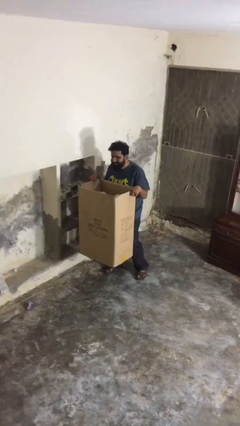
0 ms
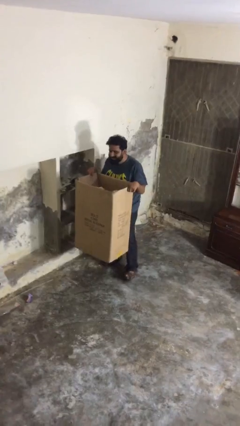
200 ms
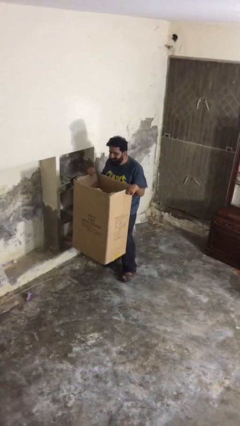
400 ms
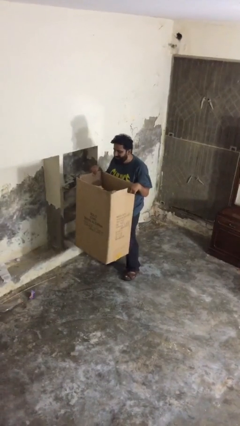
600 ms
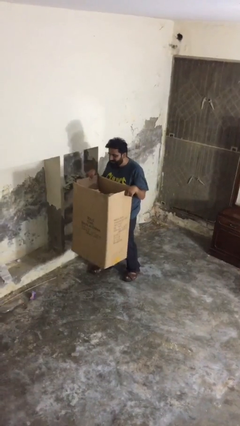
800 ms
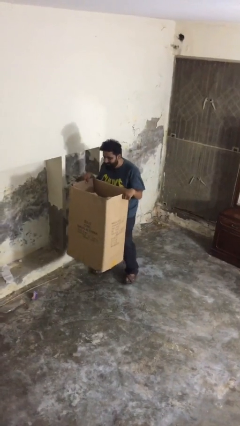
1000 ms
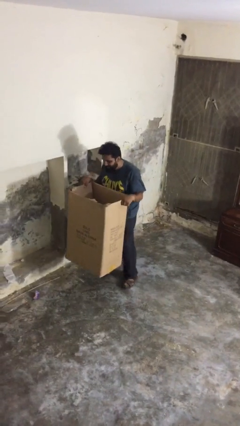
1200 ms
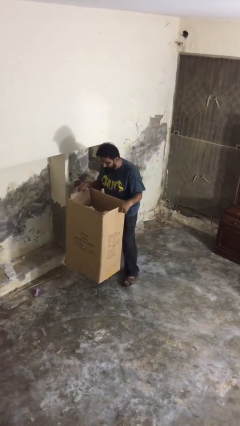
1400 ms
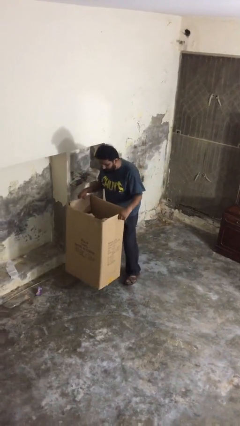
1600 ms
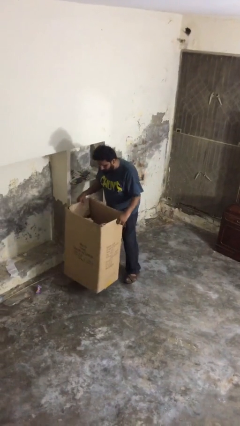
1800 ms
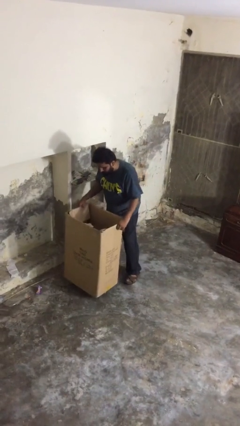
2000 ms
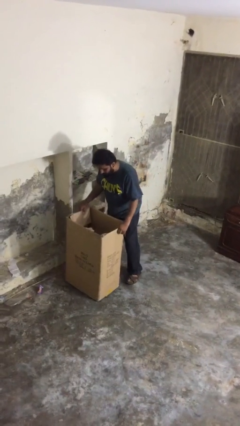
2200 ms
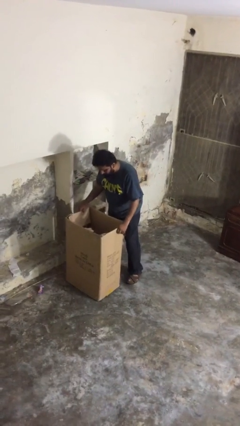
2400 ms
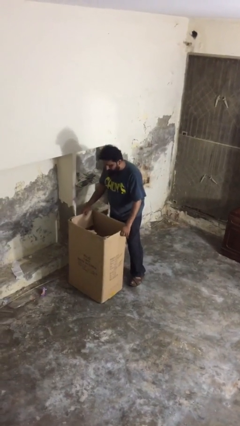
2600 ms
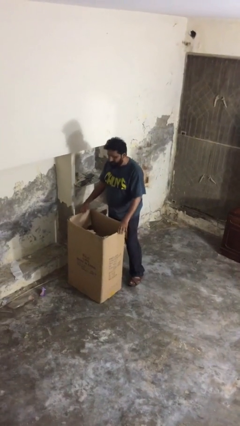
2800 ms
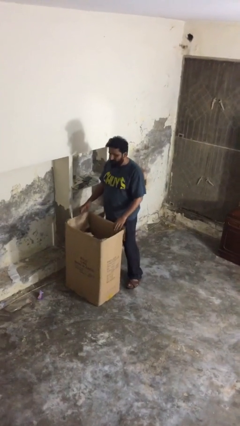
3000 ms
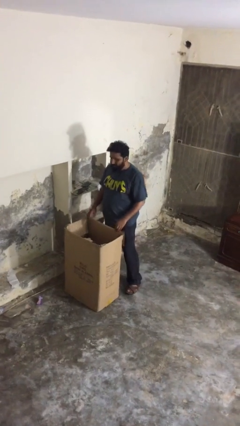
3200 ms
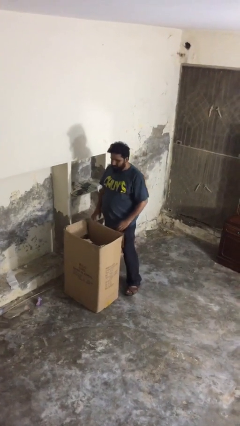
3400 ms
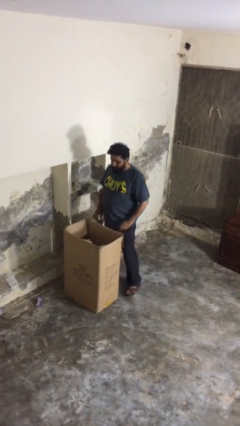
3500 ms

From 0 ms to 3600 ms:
person puts down object on floor

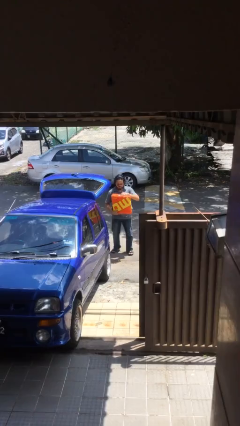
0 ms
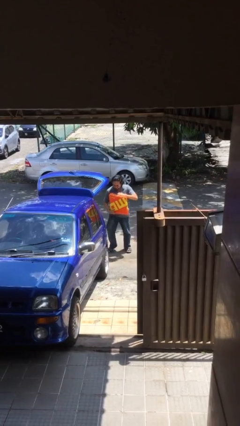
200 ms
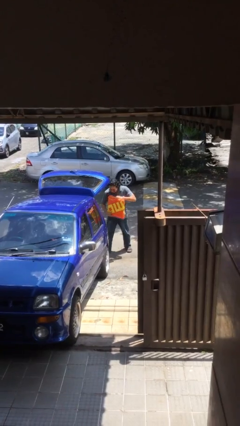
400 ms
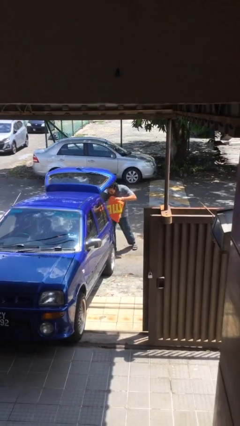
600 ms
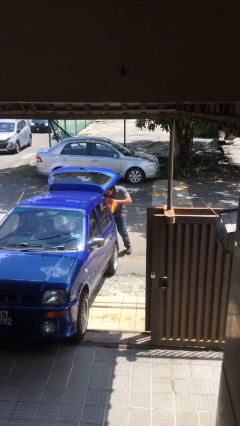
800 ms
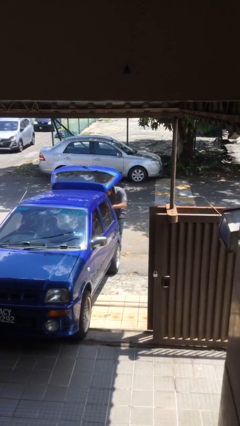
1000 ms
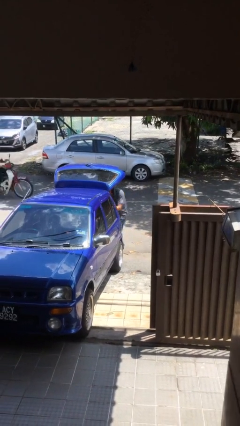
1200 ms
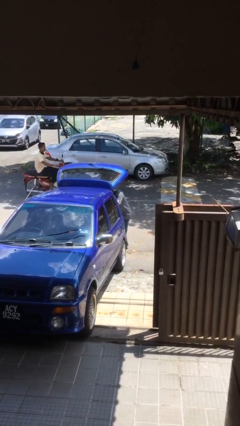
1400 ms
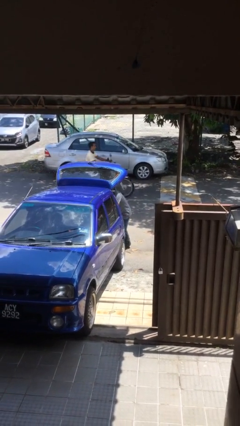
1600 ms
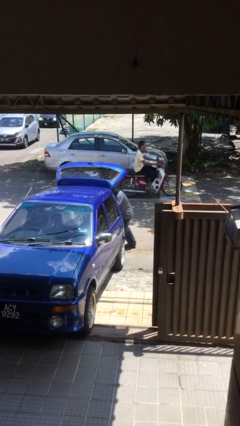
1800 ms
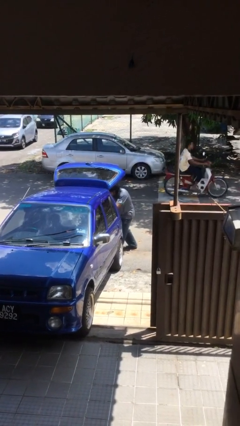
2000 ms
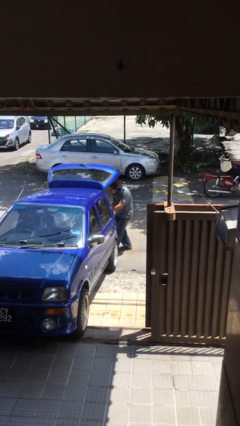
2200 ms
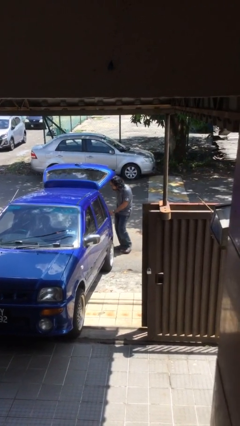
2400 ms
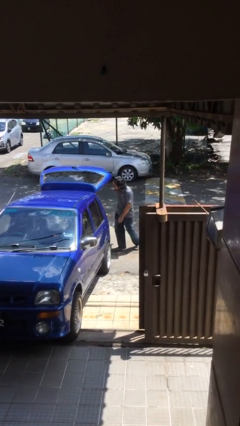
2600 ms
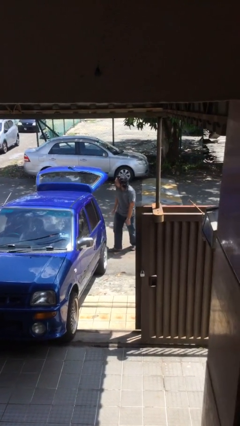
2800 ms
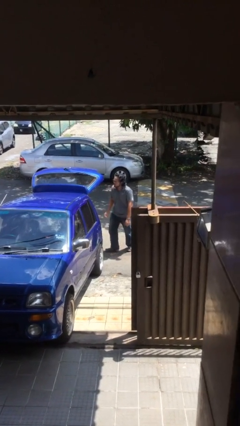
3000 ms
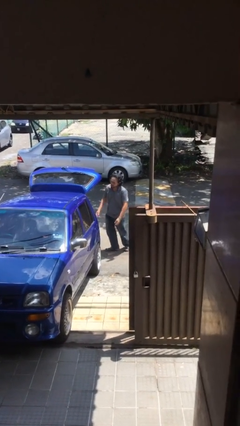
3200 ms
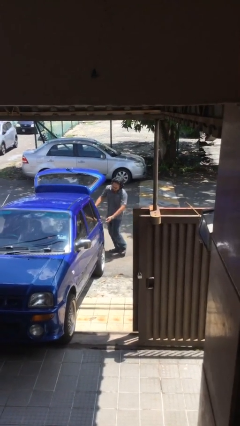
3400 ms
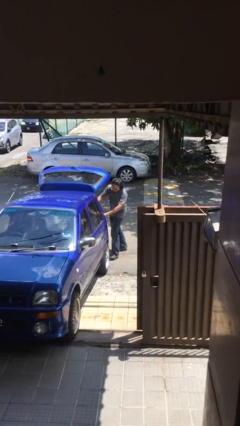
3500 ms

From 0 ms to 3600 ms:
person loads car

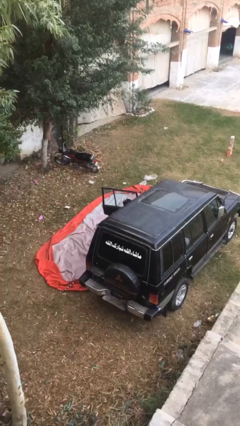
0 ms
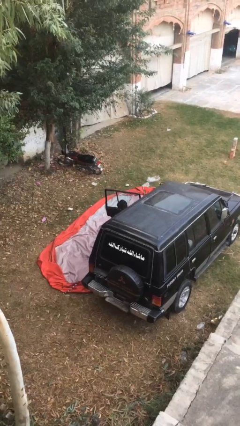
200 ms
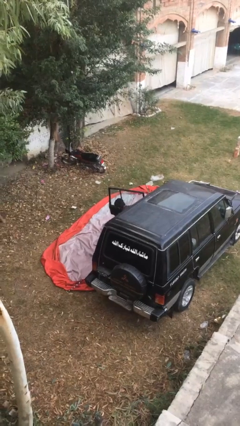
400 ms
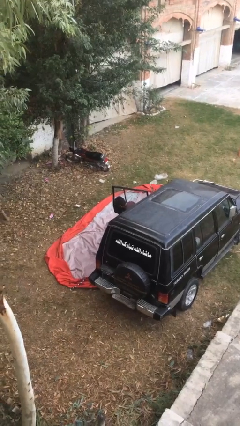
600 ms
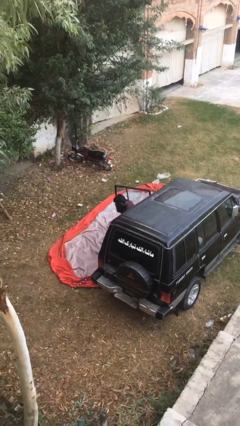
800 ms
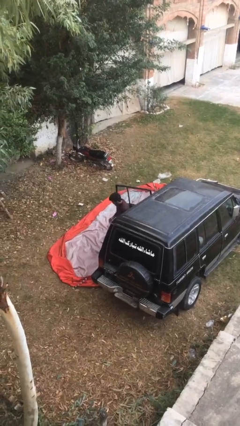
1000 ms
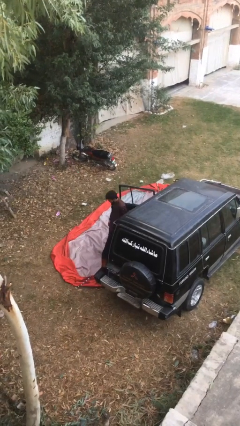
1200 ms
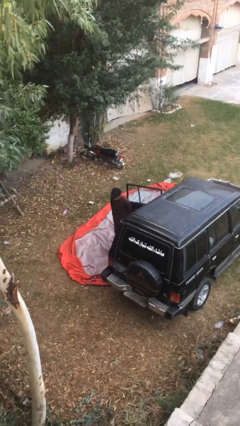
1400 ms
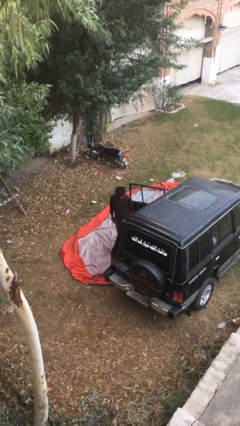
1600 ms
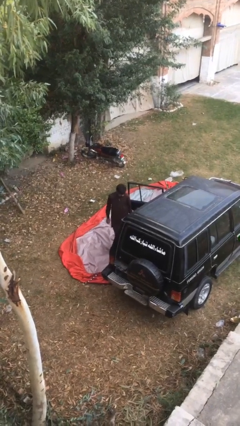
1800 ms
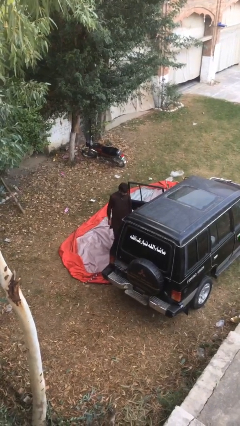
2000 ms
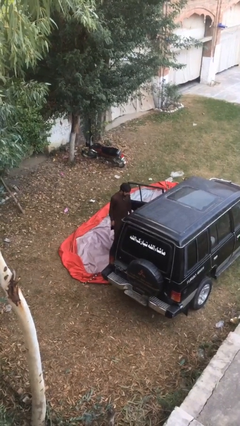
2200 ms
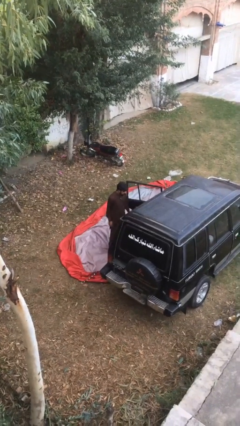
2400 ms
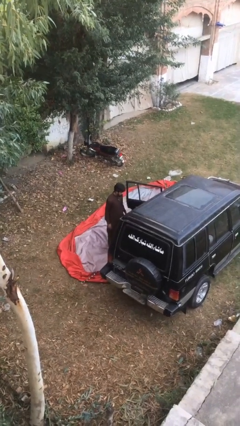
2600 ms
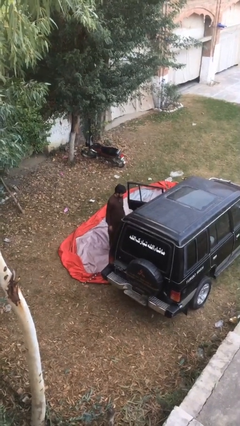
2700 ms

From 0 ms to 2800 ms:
person exits car

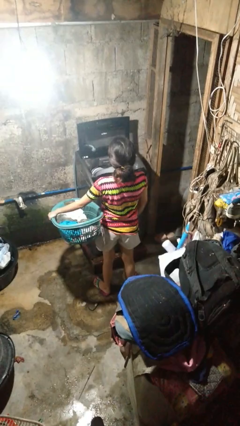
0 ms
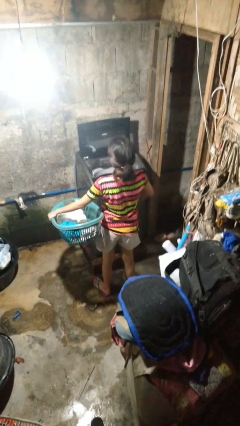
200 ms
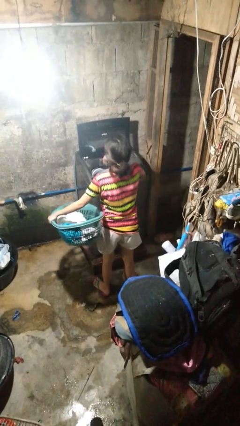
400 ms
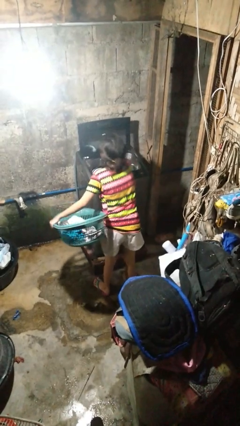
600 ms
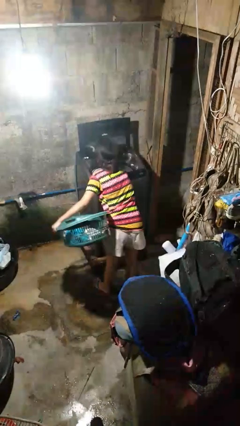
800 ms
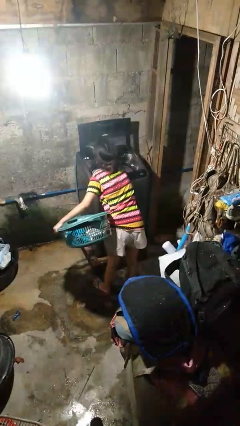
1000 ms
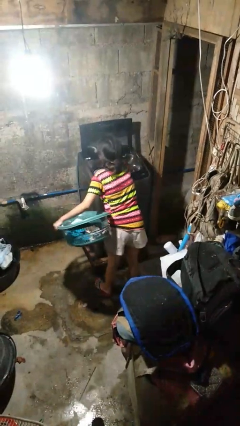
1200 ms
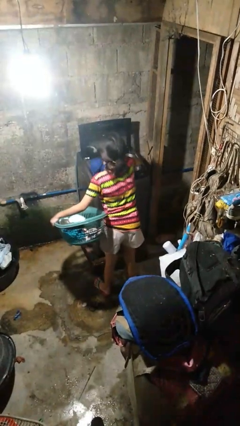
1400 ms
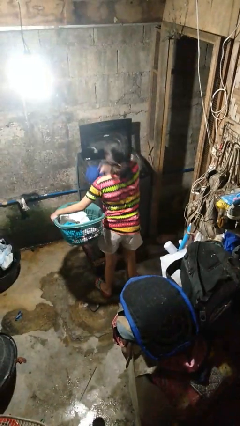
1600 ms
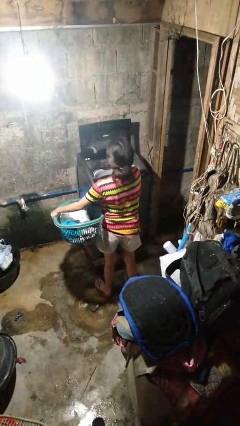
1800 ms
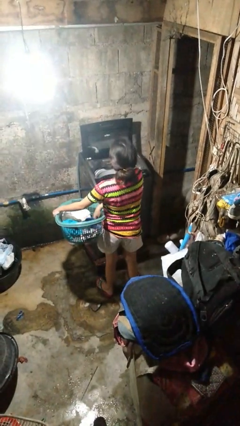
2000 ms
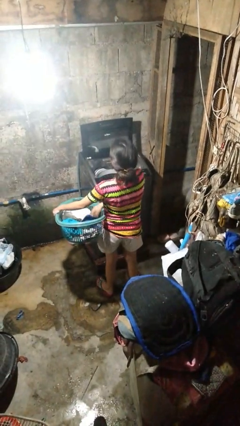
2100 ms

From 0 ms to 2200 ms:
person unloads clotheswasher

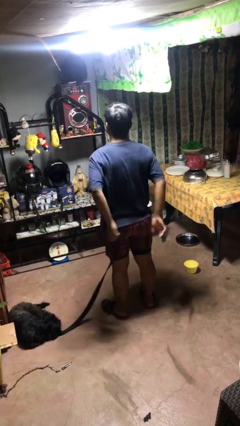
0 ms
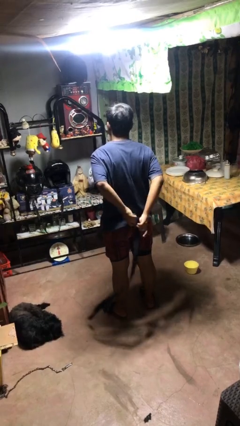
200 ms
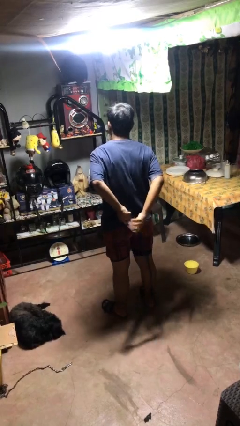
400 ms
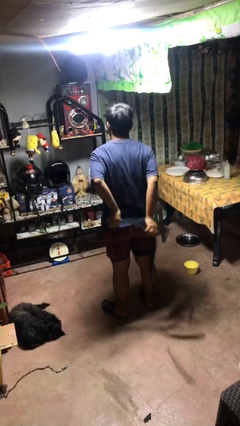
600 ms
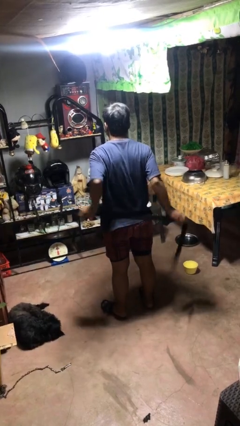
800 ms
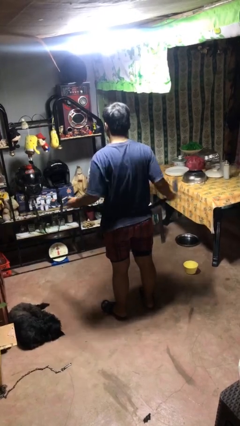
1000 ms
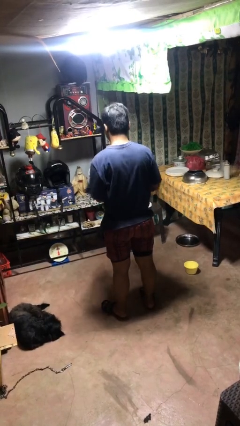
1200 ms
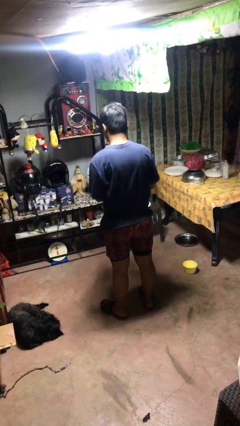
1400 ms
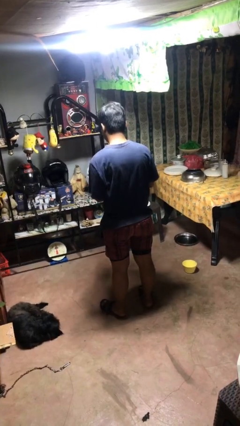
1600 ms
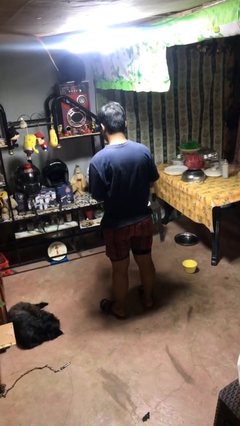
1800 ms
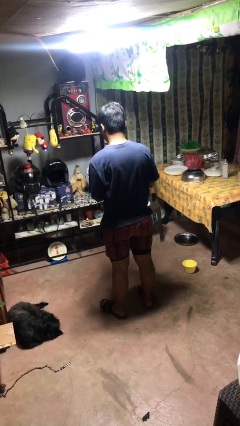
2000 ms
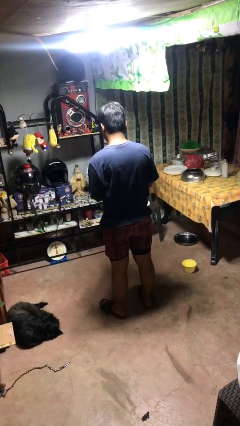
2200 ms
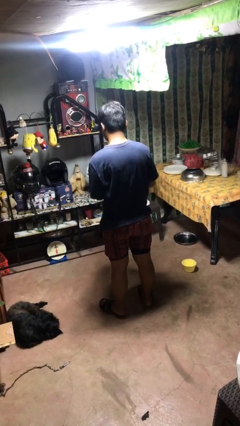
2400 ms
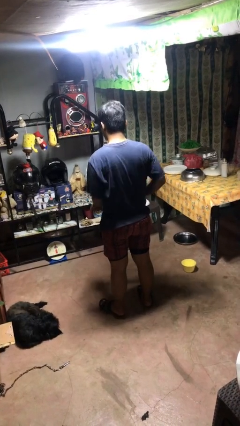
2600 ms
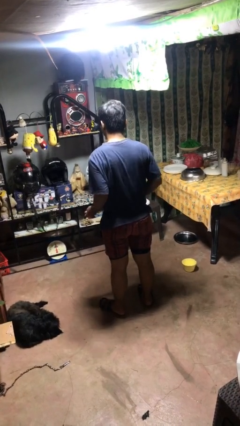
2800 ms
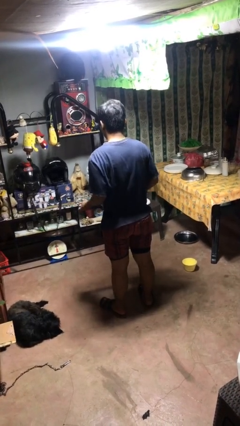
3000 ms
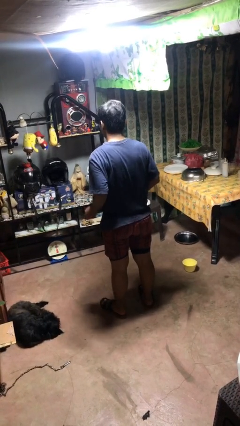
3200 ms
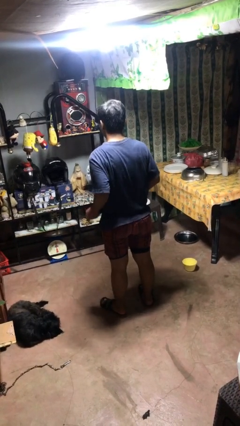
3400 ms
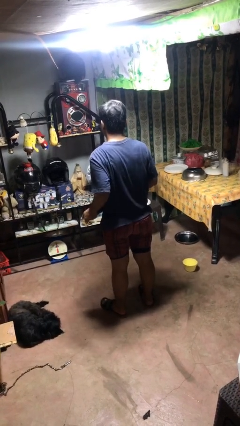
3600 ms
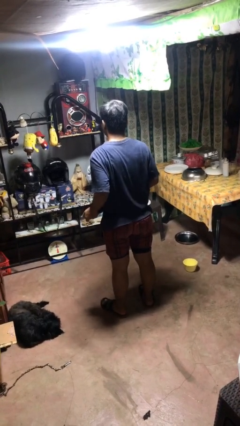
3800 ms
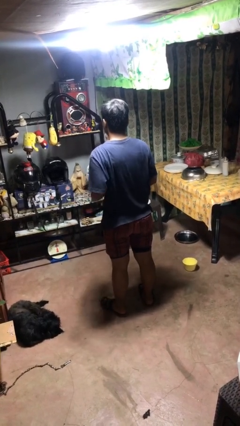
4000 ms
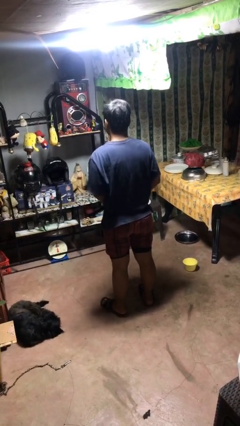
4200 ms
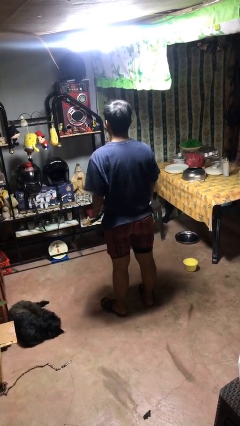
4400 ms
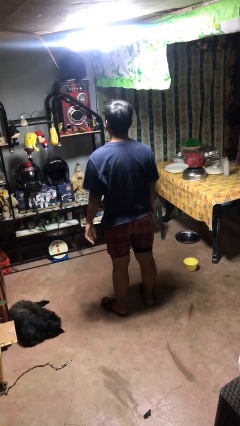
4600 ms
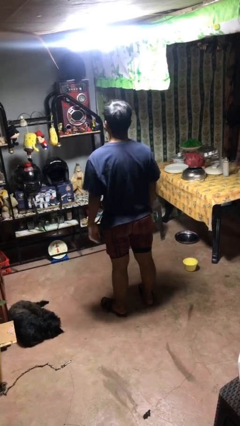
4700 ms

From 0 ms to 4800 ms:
person puts on belt

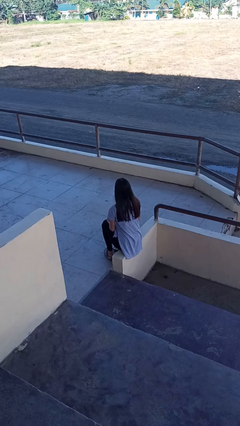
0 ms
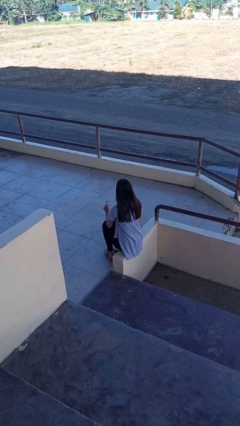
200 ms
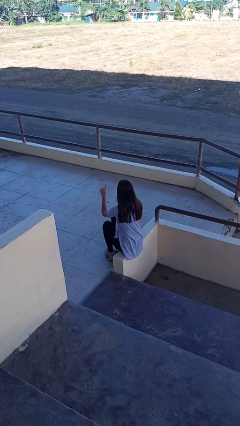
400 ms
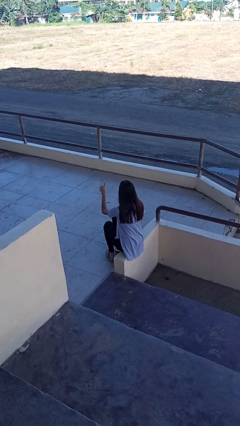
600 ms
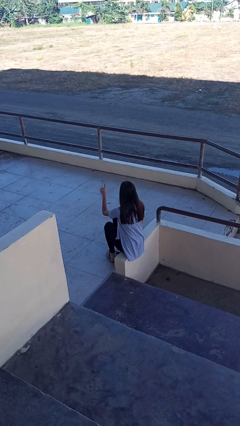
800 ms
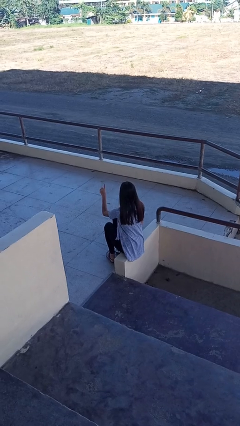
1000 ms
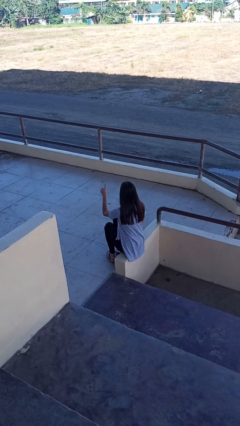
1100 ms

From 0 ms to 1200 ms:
person gestures number one
